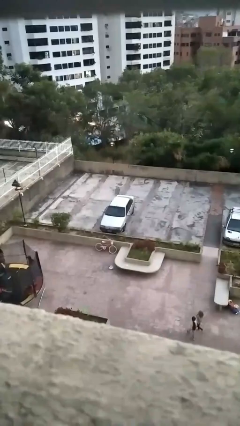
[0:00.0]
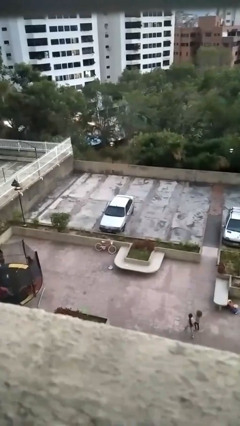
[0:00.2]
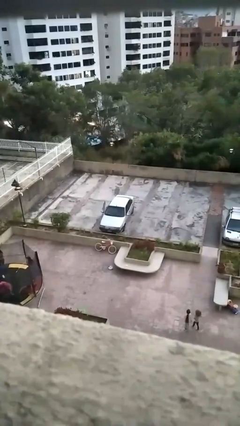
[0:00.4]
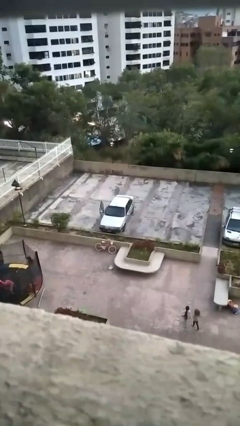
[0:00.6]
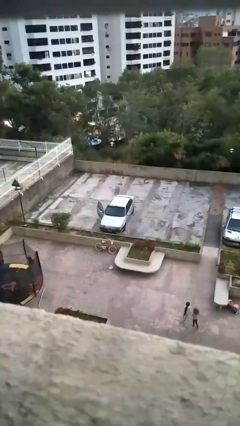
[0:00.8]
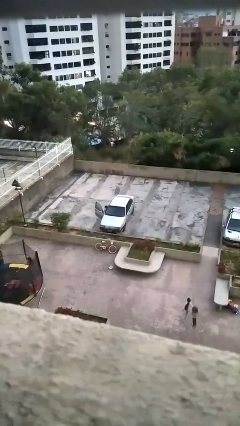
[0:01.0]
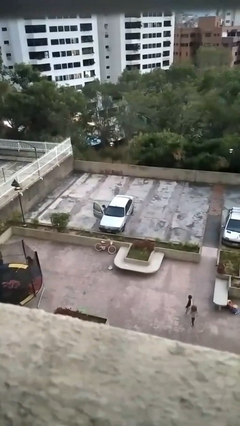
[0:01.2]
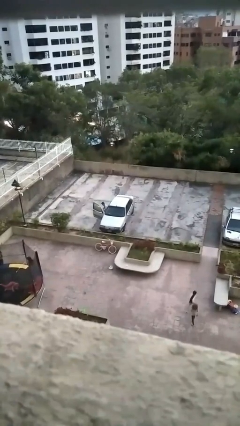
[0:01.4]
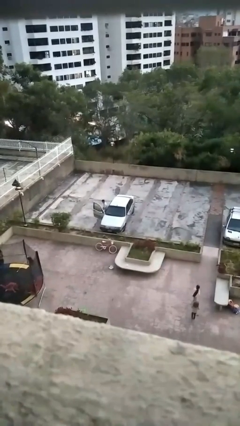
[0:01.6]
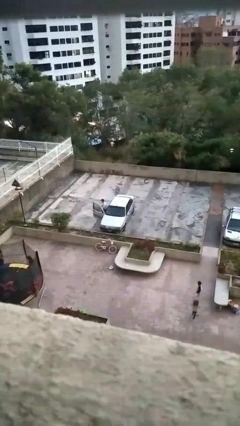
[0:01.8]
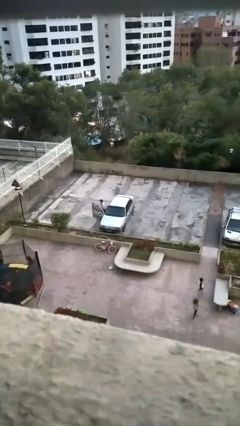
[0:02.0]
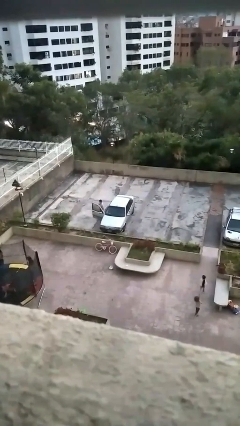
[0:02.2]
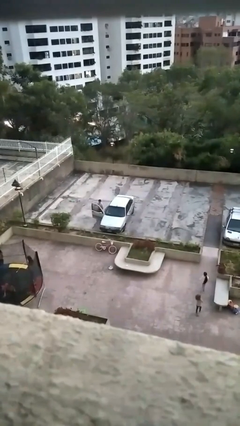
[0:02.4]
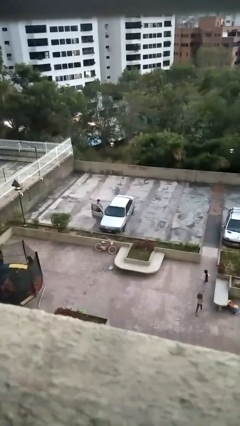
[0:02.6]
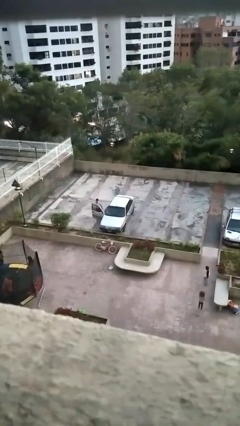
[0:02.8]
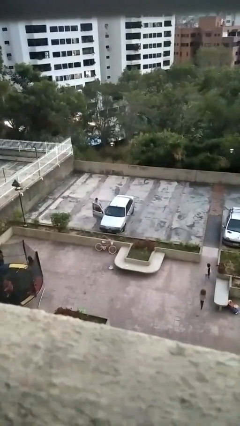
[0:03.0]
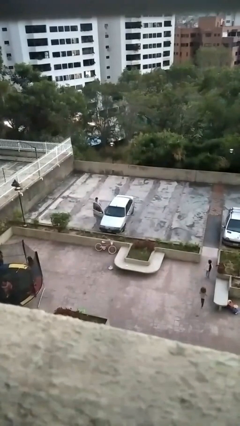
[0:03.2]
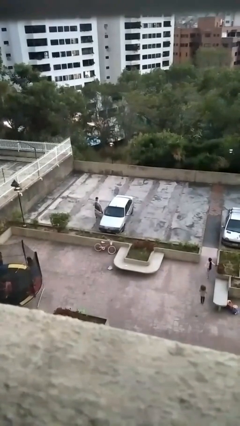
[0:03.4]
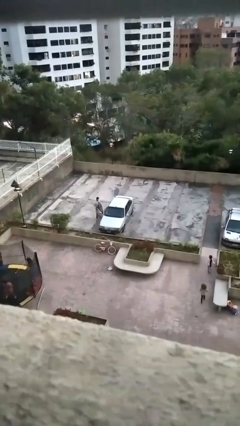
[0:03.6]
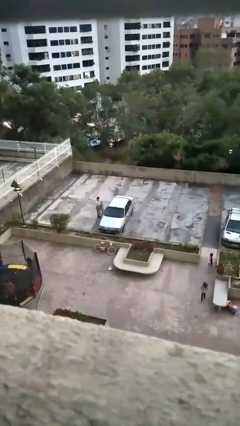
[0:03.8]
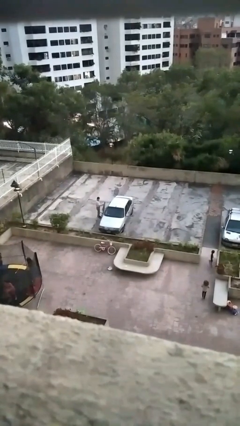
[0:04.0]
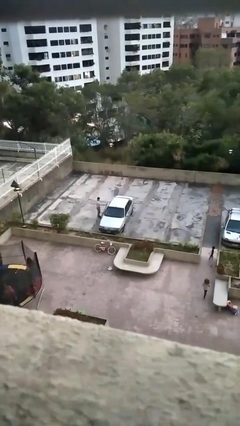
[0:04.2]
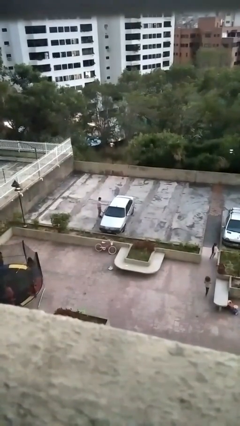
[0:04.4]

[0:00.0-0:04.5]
car drops off person

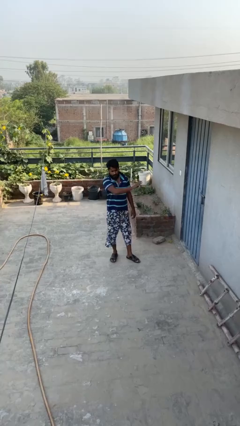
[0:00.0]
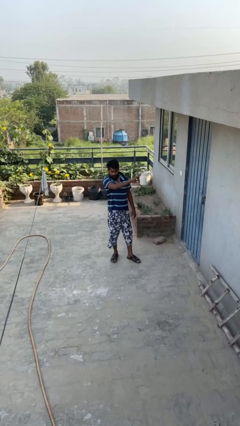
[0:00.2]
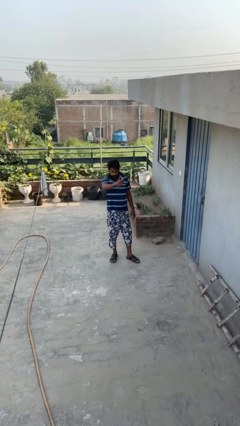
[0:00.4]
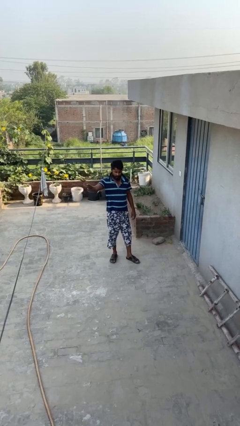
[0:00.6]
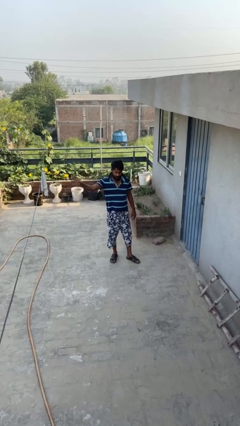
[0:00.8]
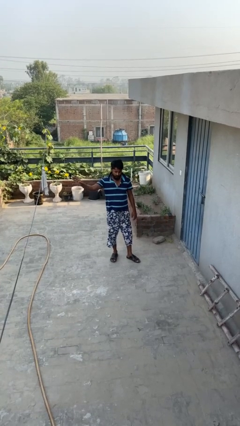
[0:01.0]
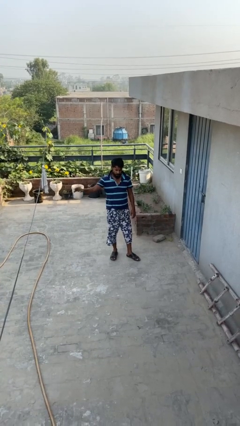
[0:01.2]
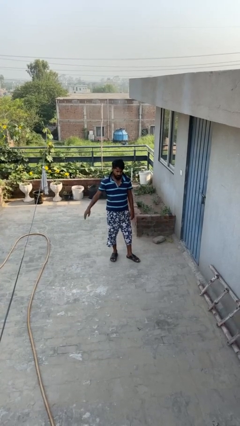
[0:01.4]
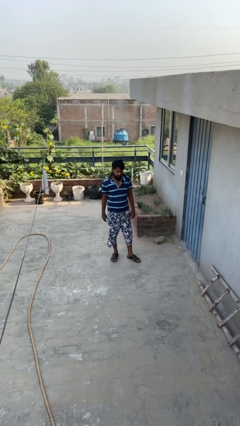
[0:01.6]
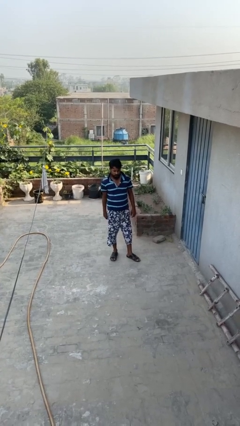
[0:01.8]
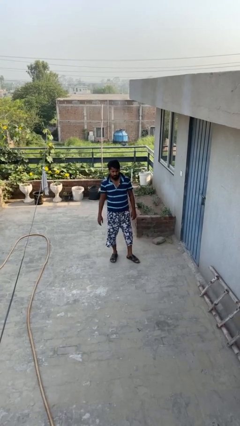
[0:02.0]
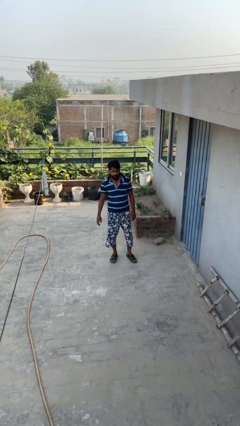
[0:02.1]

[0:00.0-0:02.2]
person gestures swipe right

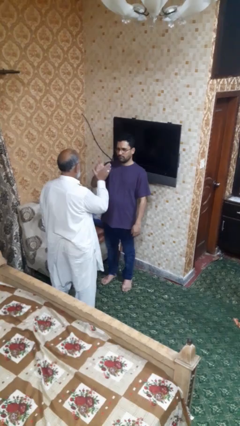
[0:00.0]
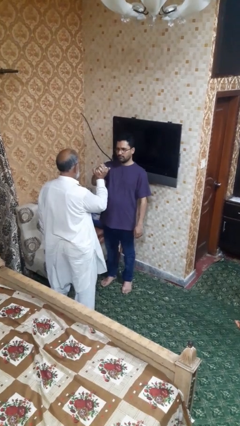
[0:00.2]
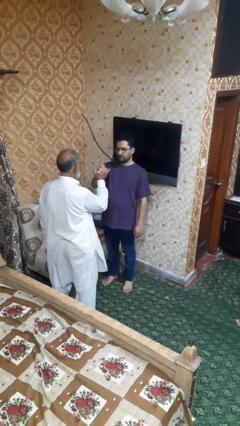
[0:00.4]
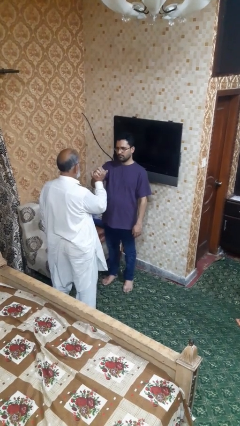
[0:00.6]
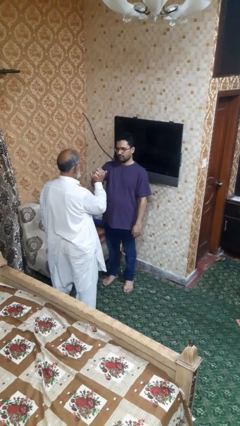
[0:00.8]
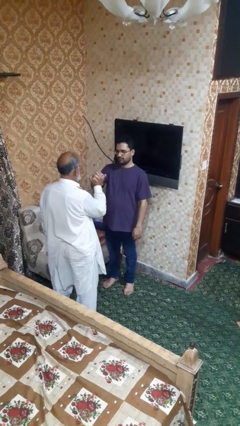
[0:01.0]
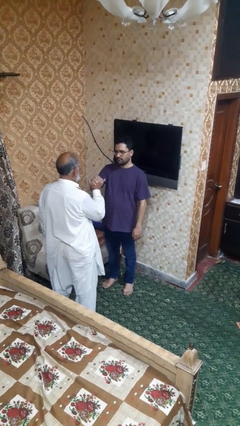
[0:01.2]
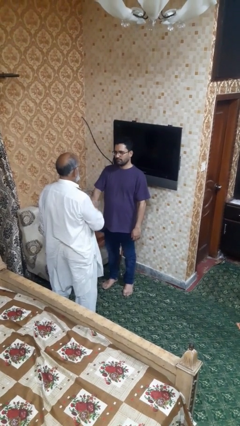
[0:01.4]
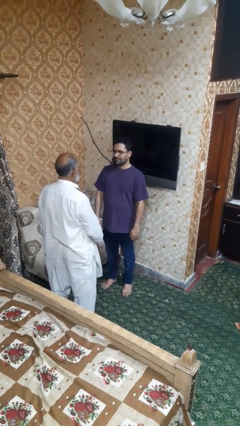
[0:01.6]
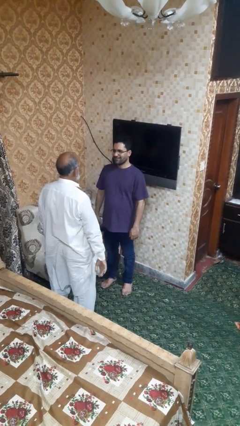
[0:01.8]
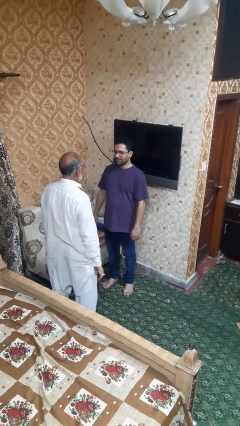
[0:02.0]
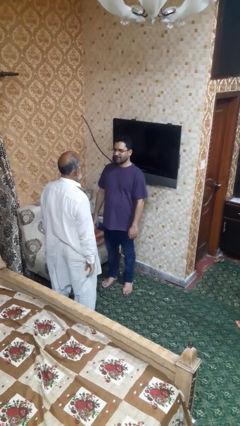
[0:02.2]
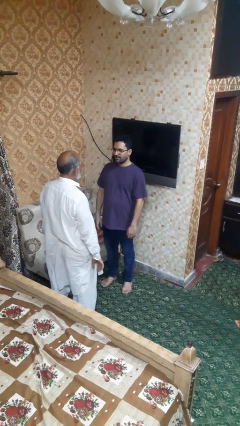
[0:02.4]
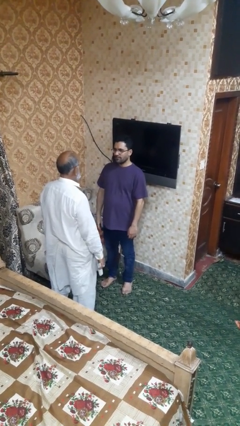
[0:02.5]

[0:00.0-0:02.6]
person highfives hand

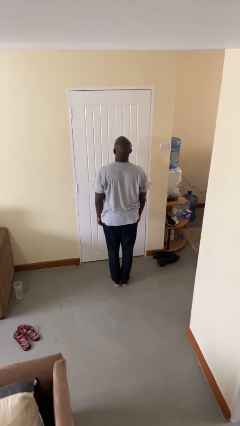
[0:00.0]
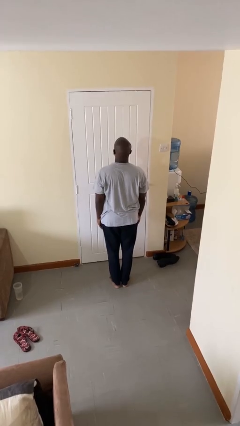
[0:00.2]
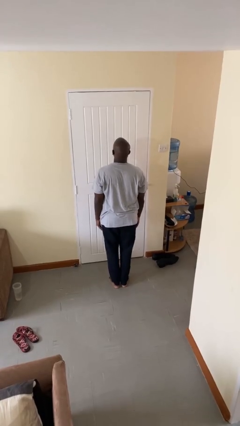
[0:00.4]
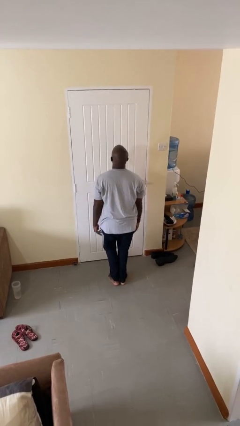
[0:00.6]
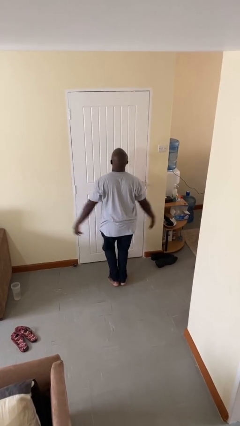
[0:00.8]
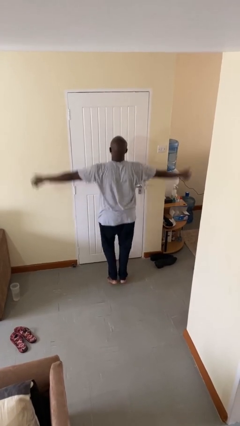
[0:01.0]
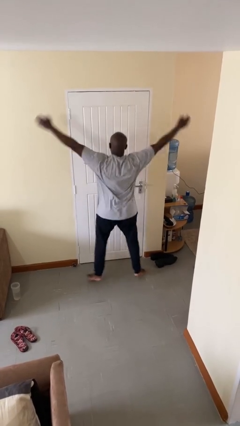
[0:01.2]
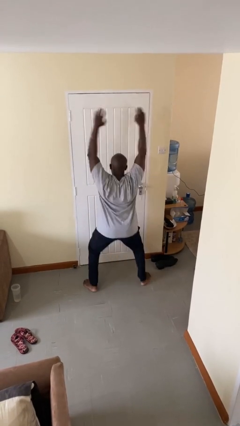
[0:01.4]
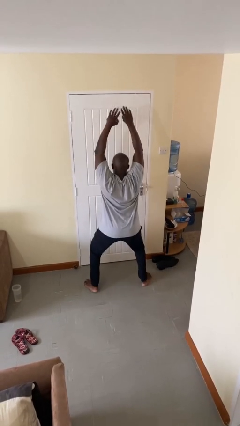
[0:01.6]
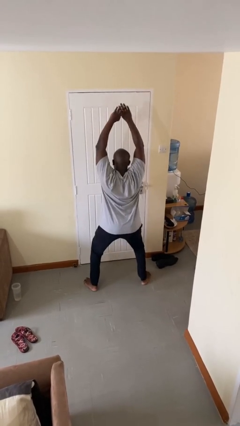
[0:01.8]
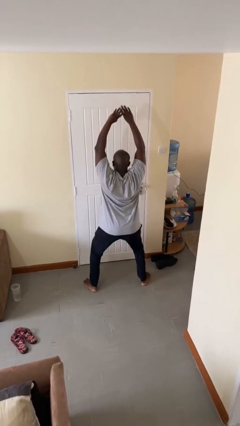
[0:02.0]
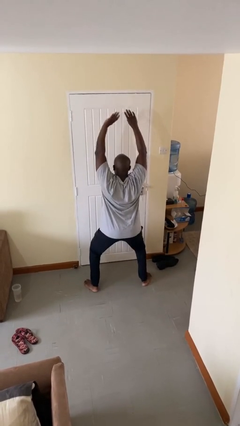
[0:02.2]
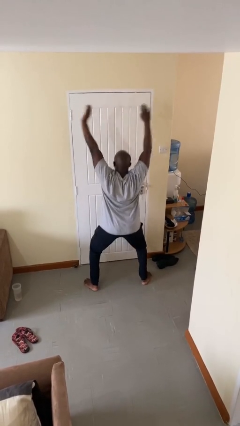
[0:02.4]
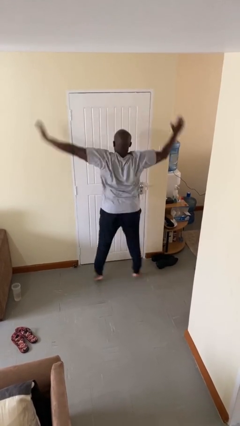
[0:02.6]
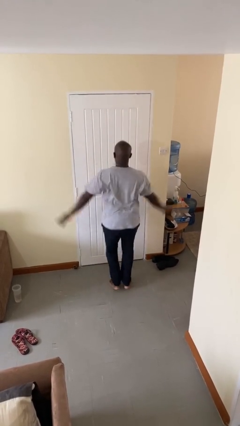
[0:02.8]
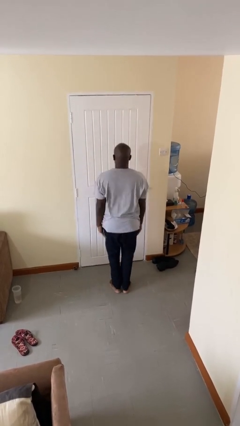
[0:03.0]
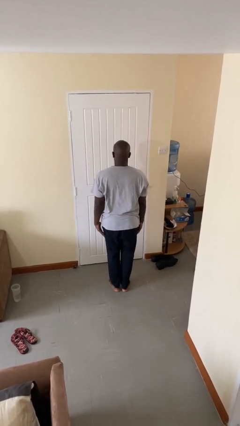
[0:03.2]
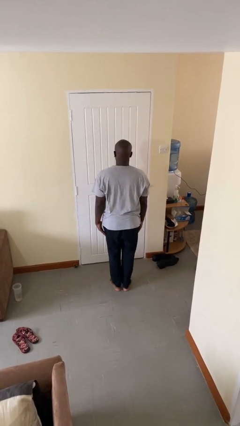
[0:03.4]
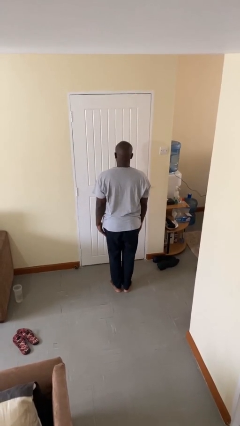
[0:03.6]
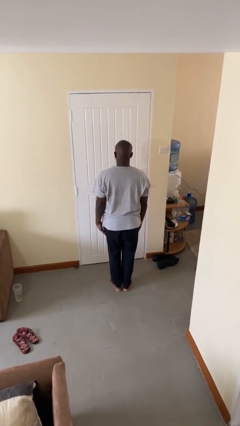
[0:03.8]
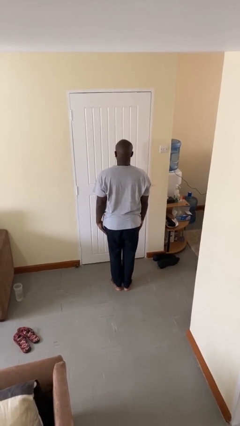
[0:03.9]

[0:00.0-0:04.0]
person exercises with jumping jacks

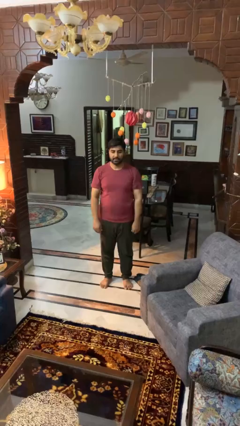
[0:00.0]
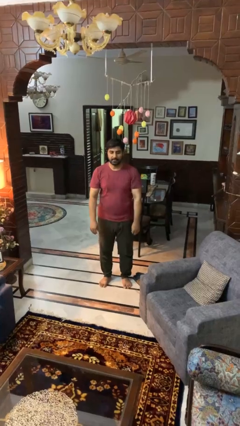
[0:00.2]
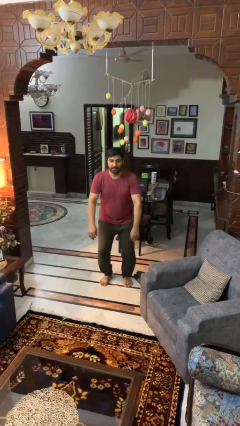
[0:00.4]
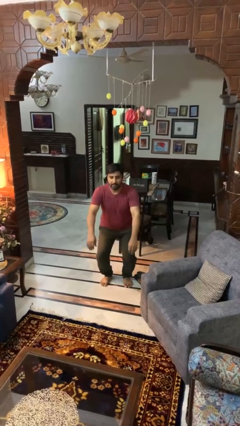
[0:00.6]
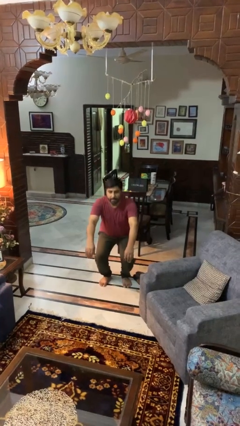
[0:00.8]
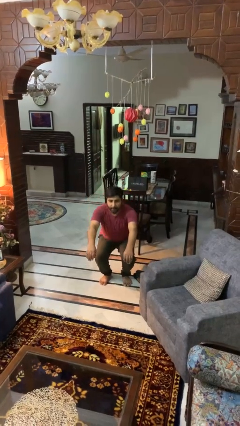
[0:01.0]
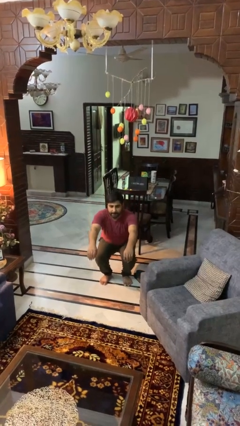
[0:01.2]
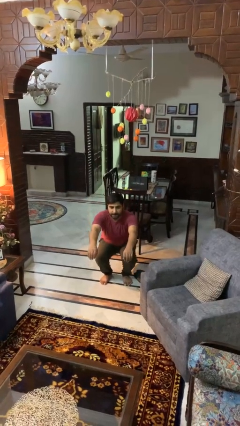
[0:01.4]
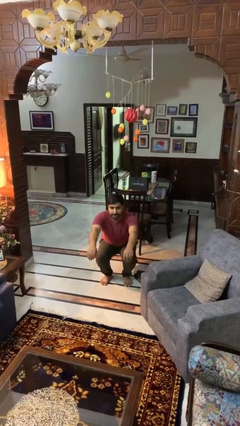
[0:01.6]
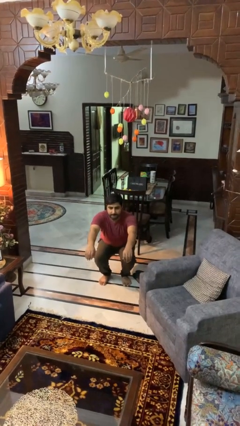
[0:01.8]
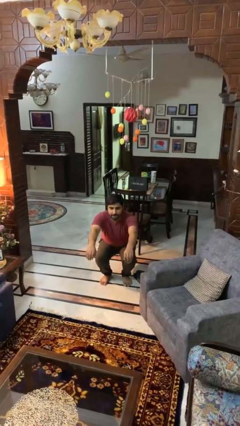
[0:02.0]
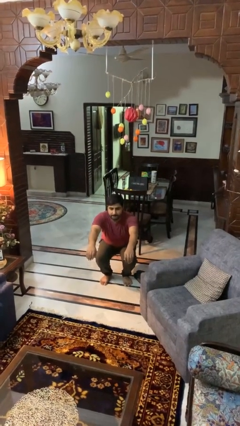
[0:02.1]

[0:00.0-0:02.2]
person squats

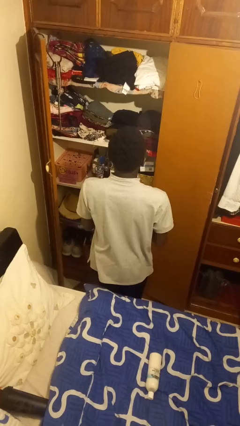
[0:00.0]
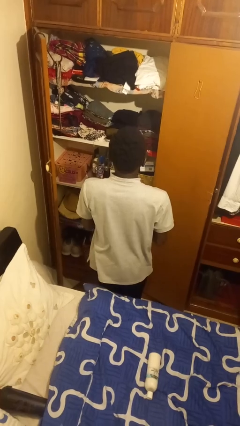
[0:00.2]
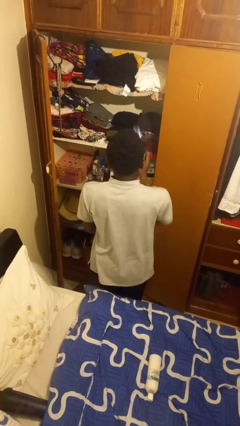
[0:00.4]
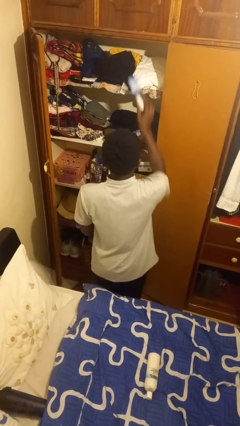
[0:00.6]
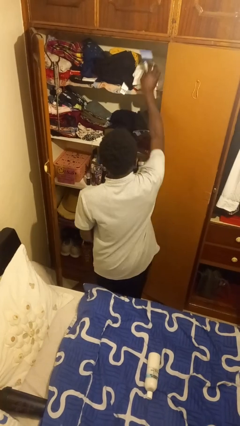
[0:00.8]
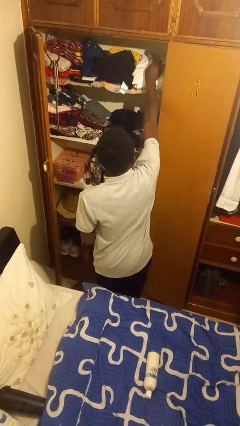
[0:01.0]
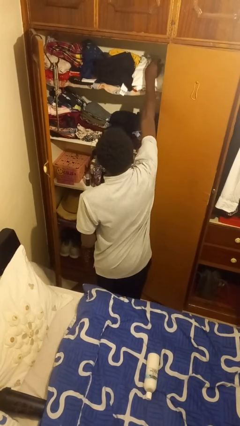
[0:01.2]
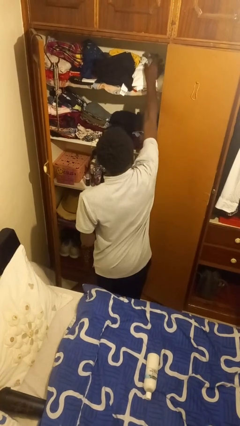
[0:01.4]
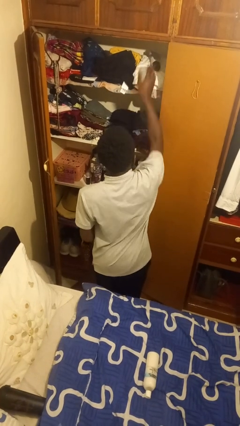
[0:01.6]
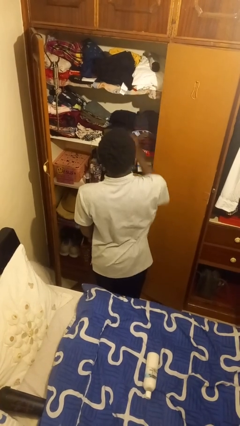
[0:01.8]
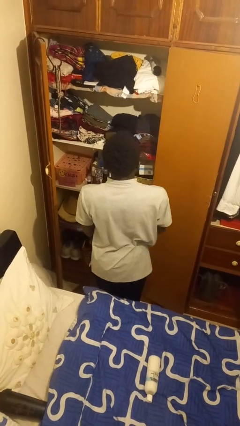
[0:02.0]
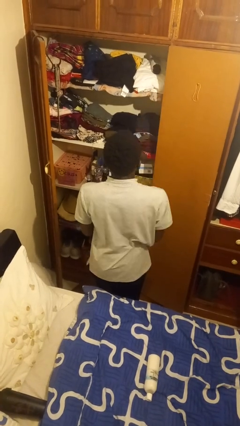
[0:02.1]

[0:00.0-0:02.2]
person puts down object on shelf
